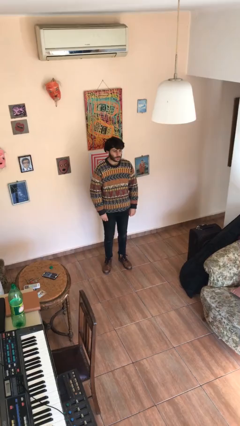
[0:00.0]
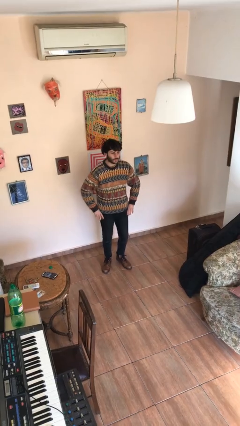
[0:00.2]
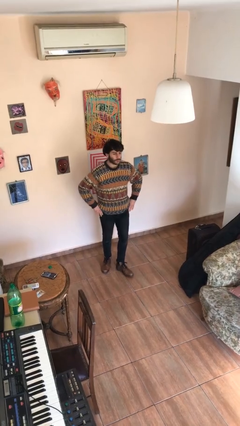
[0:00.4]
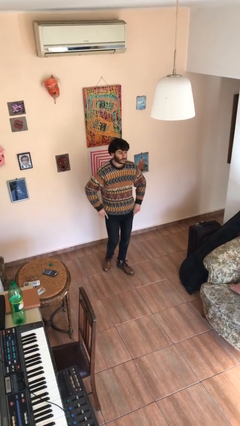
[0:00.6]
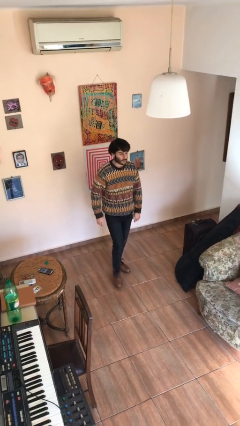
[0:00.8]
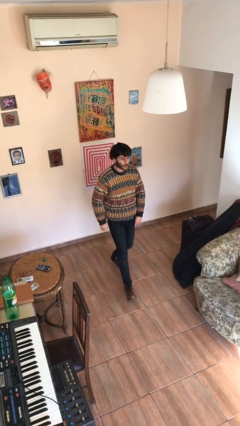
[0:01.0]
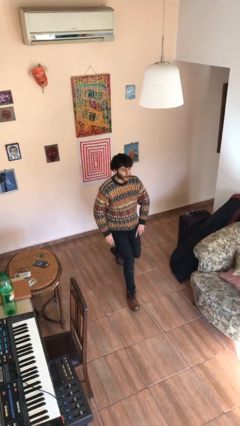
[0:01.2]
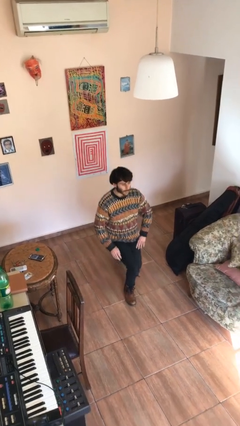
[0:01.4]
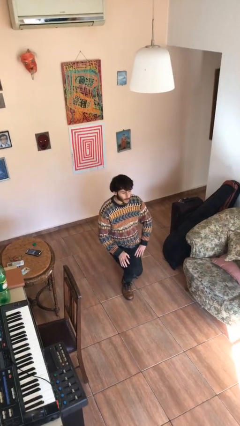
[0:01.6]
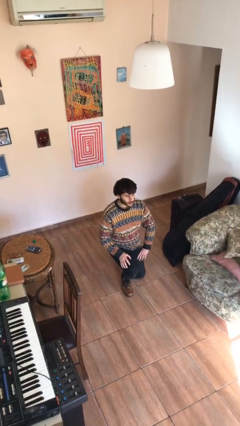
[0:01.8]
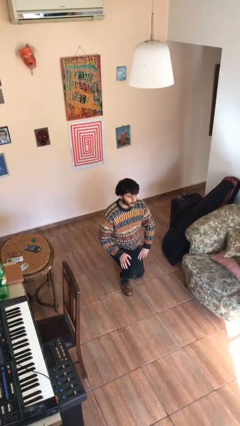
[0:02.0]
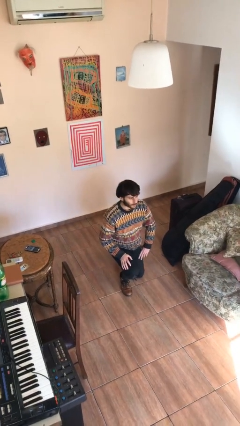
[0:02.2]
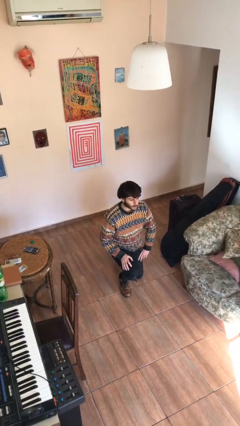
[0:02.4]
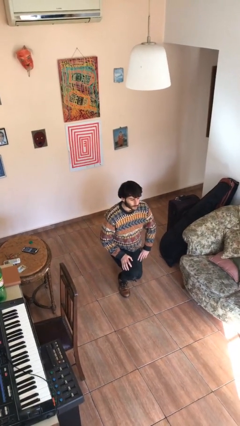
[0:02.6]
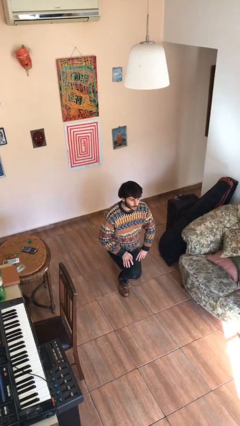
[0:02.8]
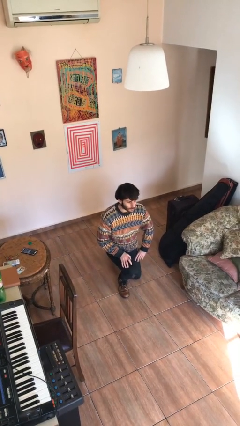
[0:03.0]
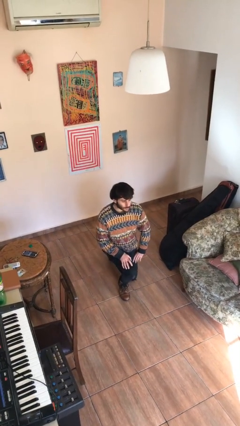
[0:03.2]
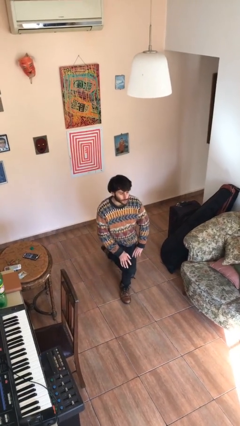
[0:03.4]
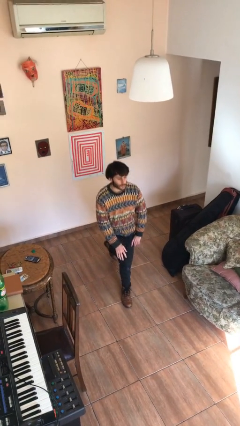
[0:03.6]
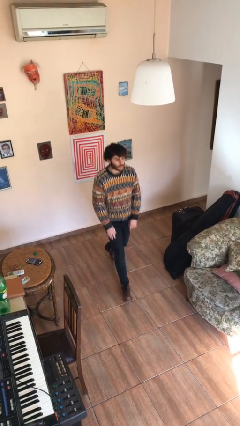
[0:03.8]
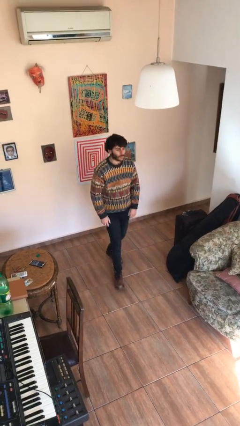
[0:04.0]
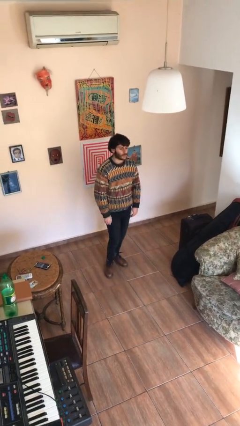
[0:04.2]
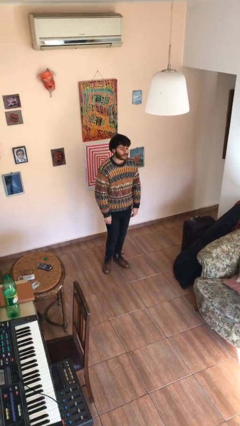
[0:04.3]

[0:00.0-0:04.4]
person exercises with lunges

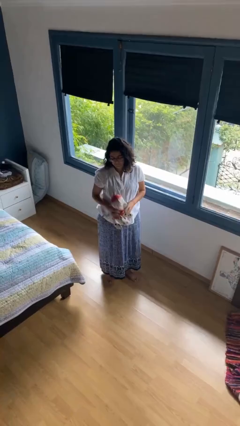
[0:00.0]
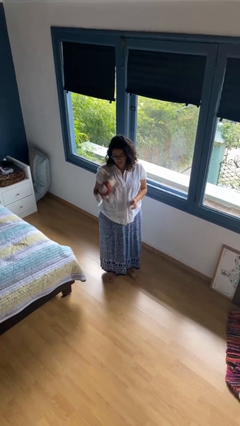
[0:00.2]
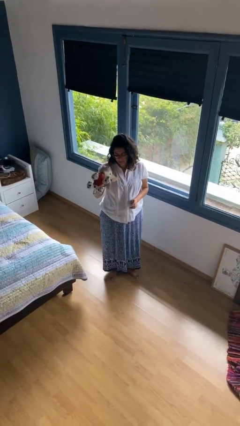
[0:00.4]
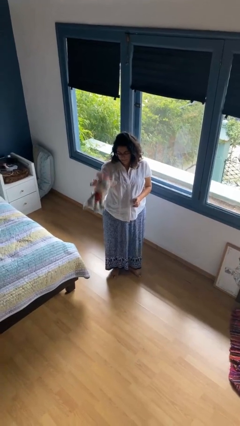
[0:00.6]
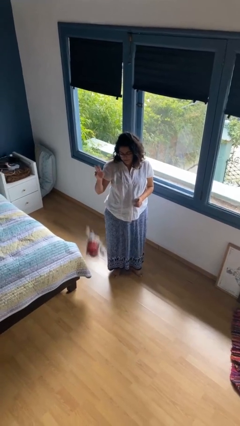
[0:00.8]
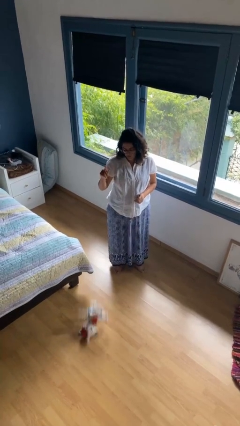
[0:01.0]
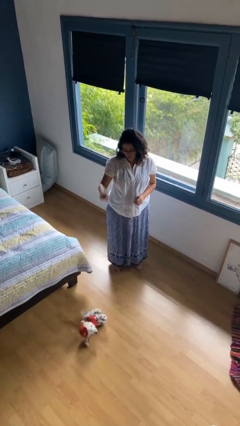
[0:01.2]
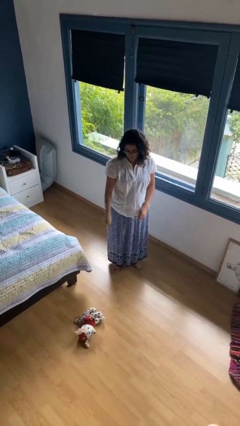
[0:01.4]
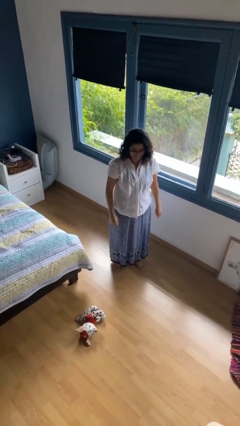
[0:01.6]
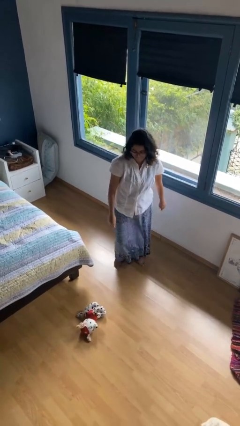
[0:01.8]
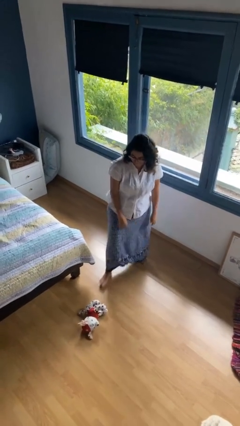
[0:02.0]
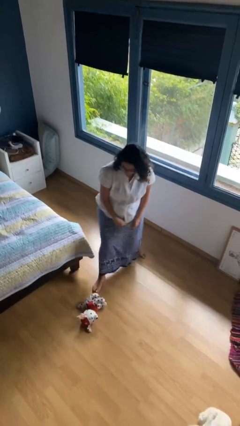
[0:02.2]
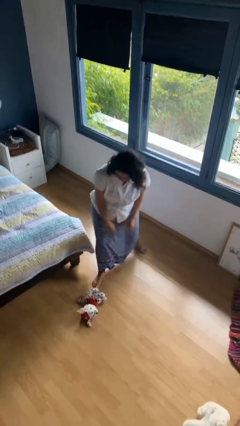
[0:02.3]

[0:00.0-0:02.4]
person throws object to ground

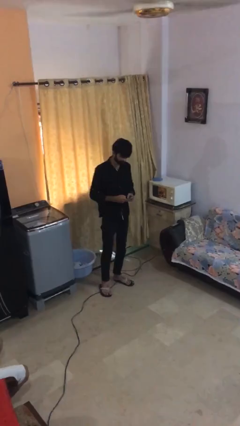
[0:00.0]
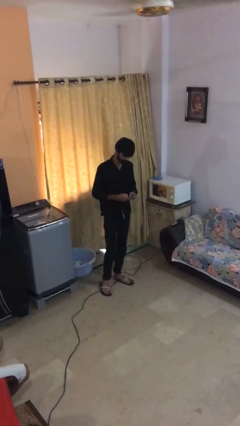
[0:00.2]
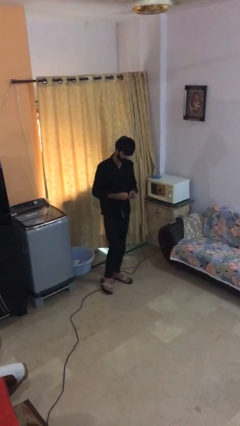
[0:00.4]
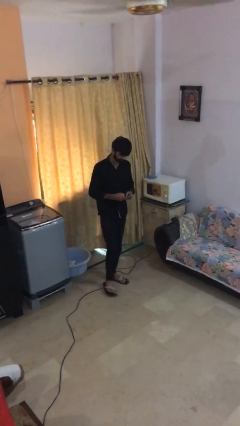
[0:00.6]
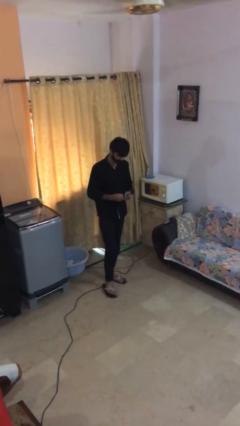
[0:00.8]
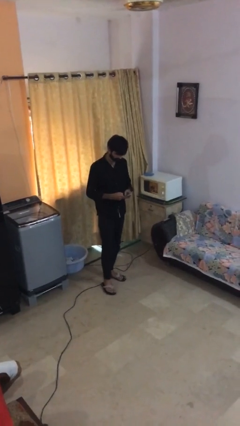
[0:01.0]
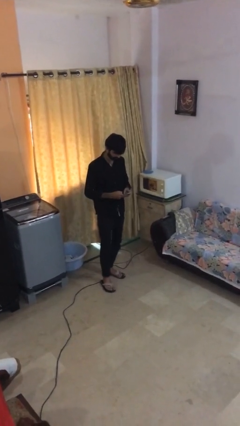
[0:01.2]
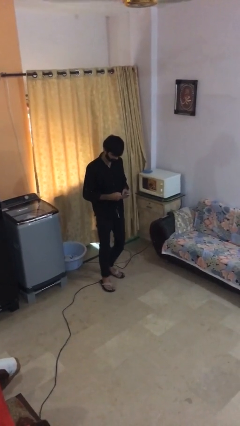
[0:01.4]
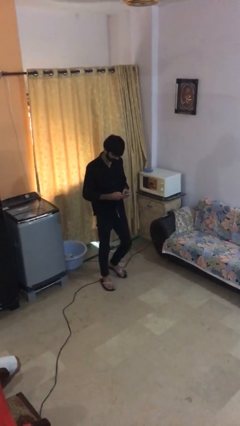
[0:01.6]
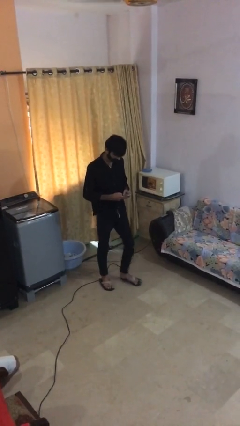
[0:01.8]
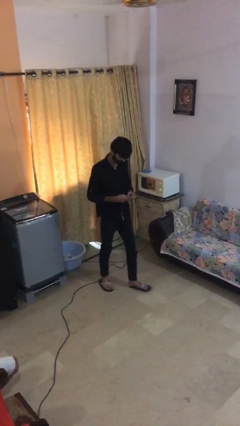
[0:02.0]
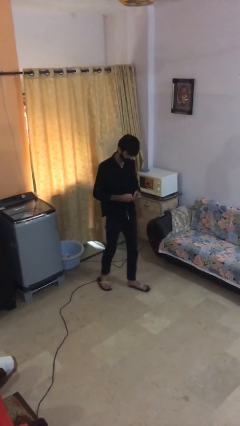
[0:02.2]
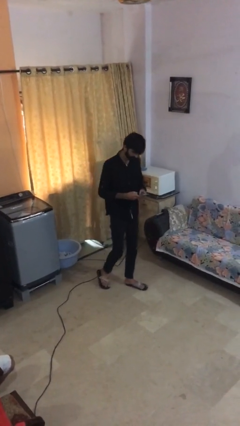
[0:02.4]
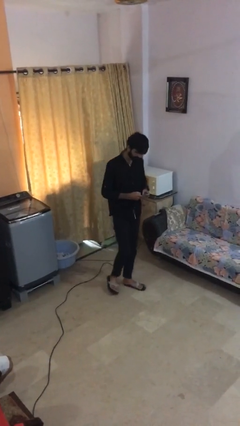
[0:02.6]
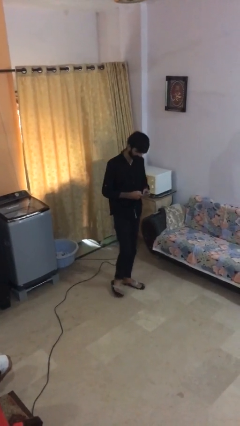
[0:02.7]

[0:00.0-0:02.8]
person texts on phone

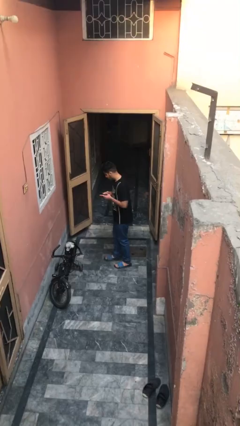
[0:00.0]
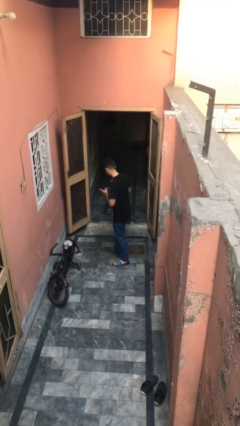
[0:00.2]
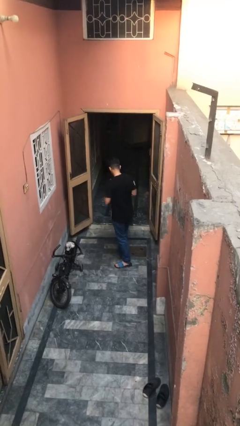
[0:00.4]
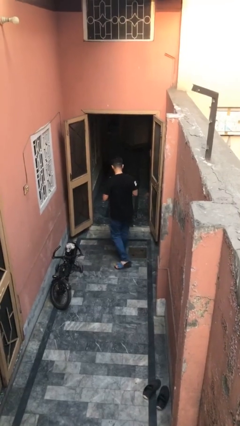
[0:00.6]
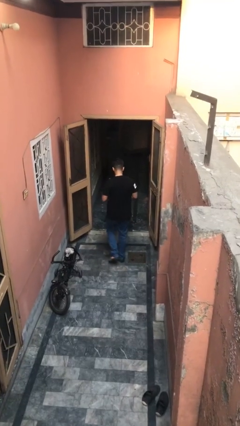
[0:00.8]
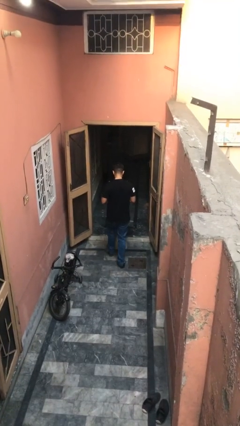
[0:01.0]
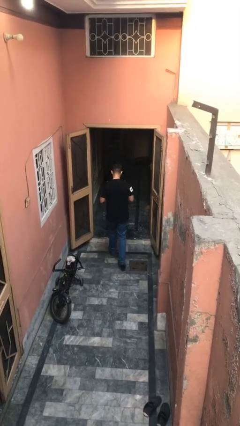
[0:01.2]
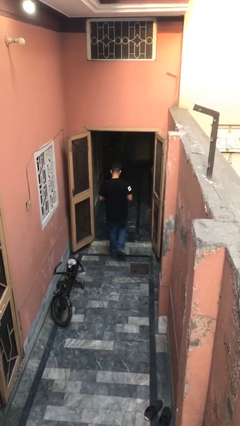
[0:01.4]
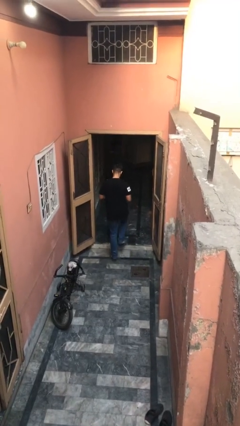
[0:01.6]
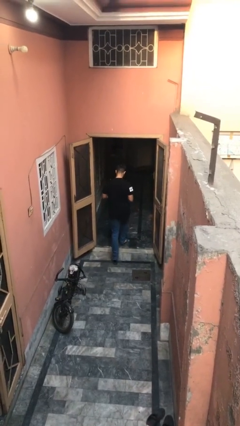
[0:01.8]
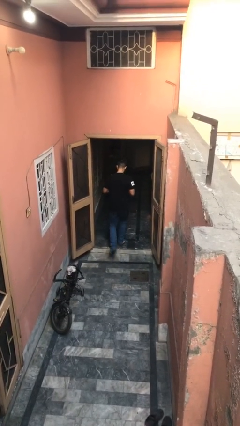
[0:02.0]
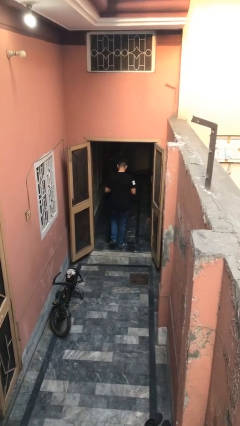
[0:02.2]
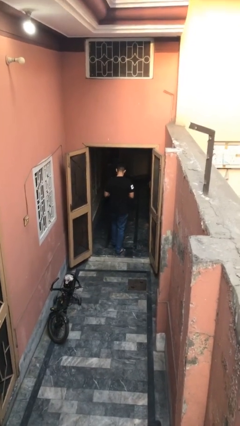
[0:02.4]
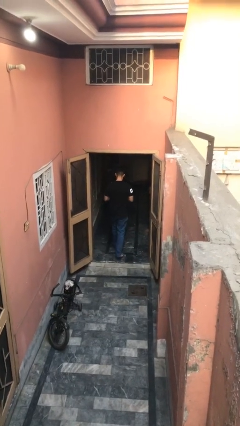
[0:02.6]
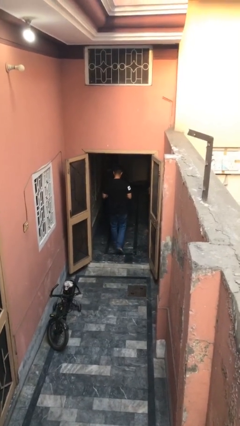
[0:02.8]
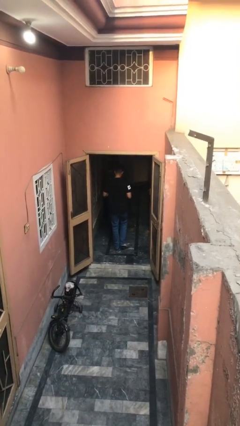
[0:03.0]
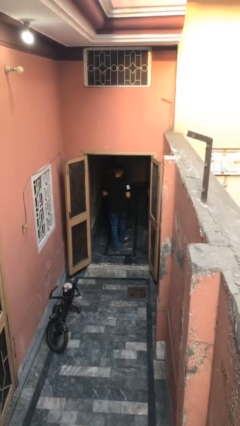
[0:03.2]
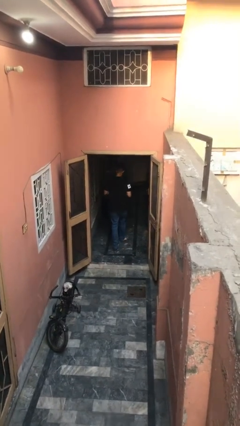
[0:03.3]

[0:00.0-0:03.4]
person exits scene through structure

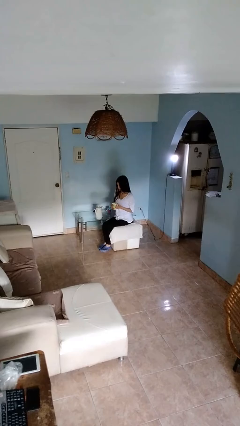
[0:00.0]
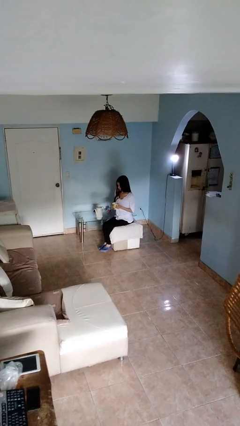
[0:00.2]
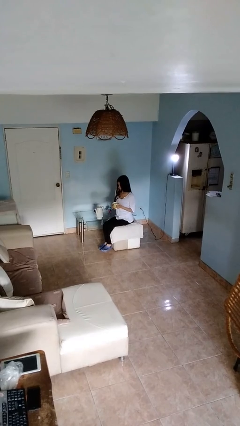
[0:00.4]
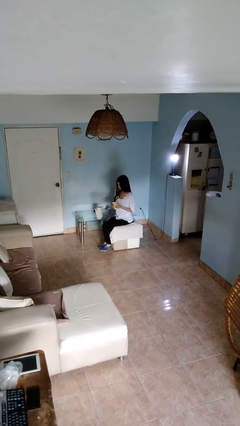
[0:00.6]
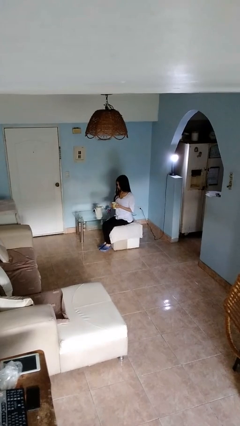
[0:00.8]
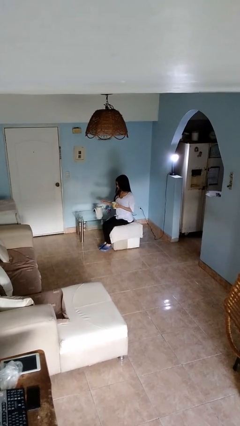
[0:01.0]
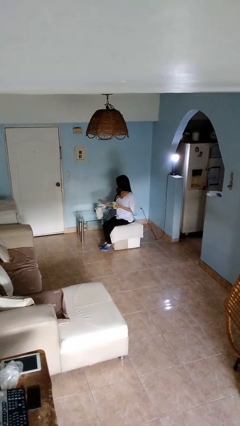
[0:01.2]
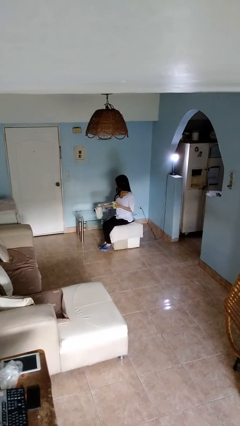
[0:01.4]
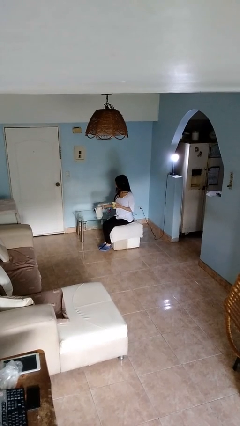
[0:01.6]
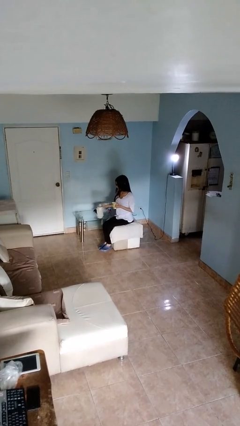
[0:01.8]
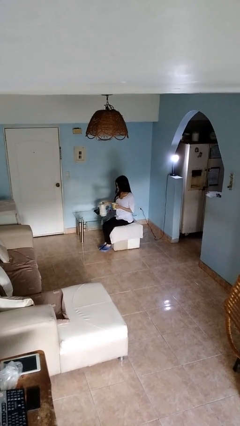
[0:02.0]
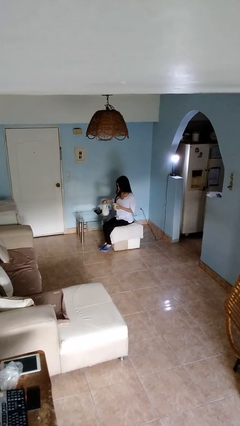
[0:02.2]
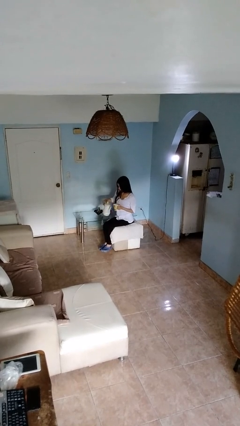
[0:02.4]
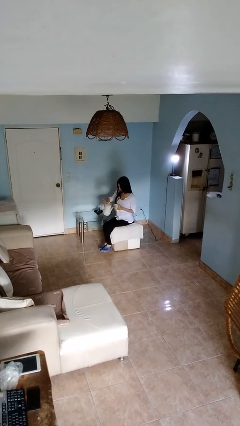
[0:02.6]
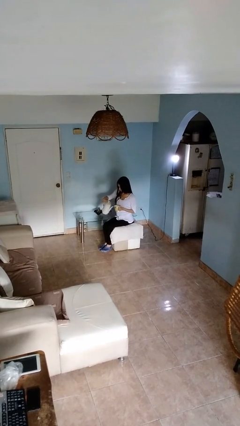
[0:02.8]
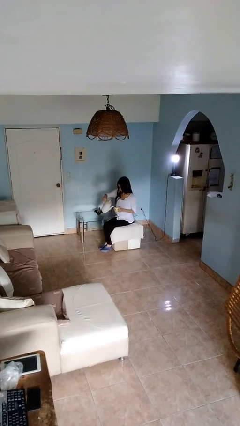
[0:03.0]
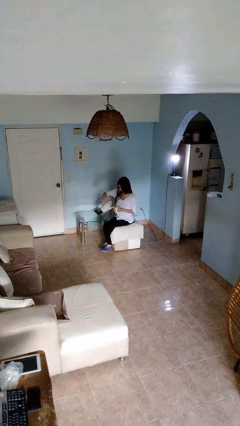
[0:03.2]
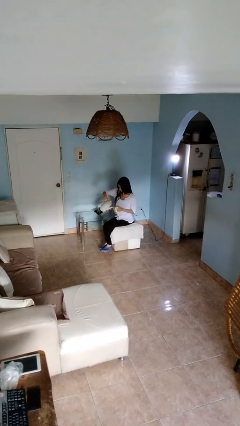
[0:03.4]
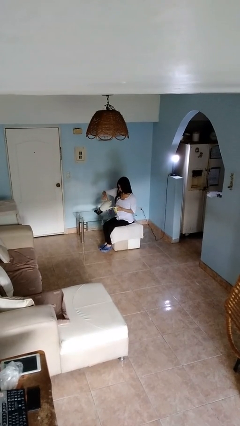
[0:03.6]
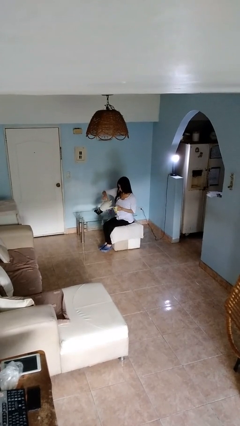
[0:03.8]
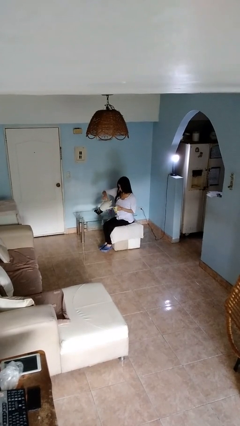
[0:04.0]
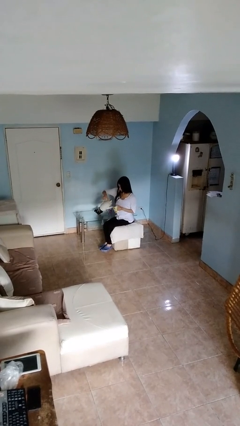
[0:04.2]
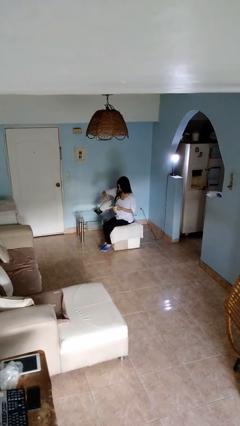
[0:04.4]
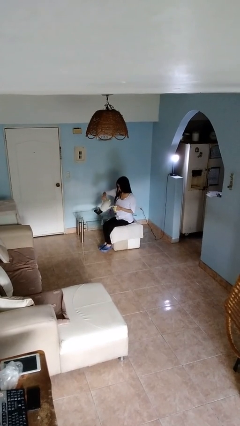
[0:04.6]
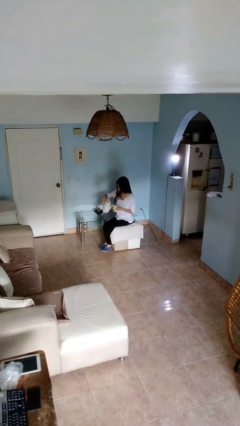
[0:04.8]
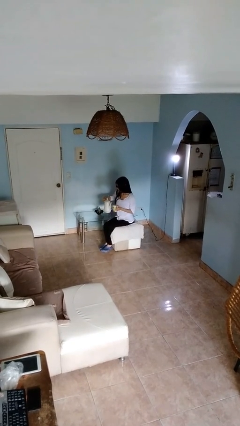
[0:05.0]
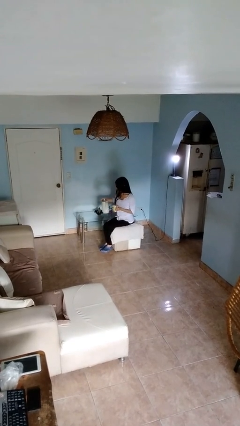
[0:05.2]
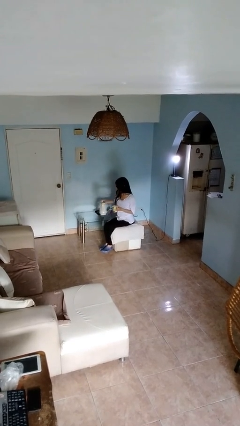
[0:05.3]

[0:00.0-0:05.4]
person pours coffee into mug
